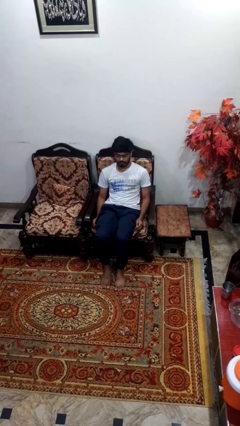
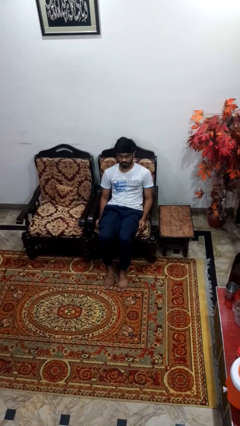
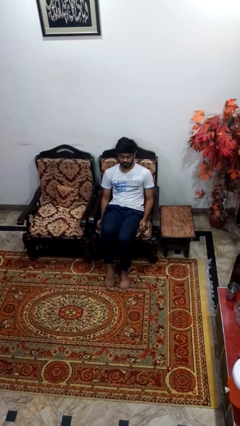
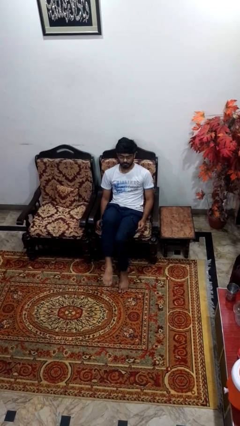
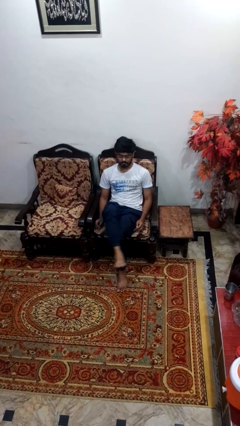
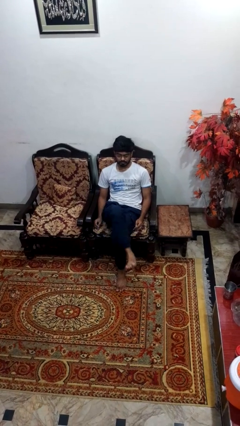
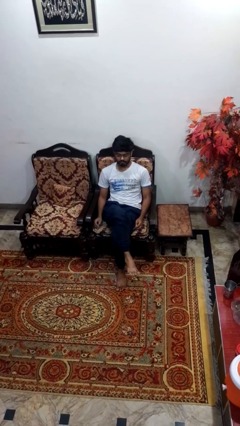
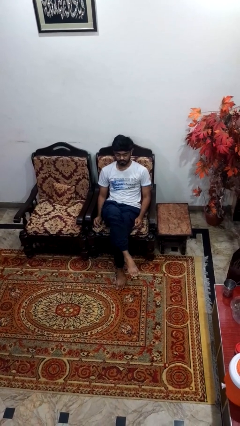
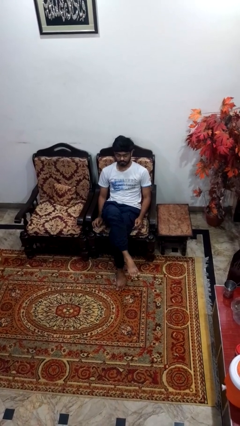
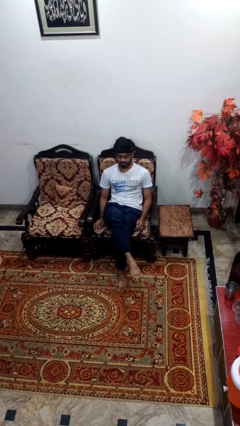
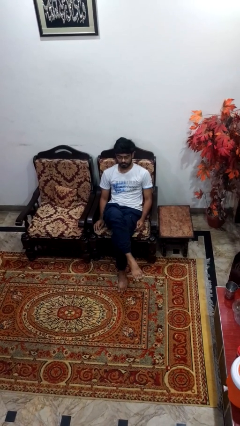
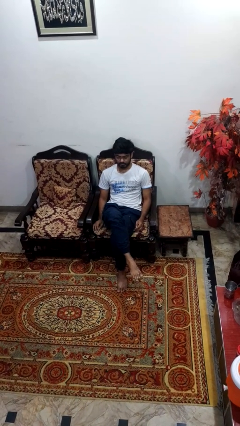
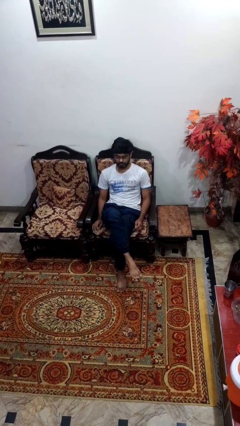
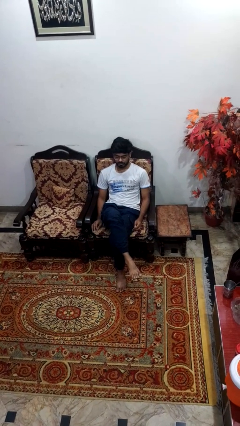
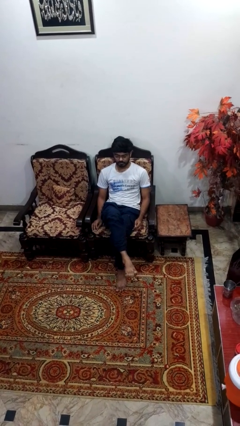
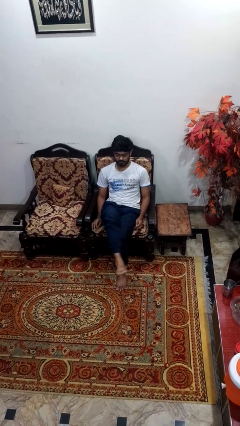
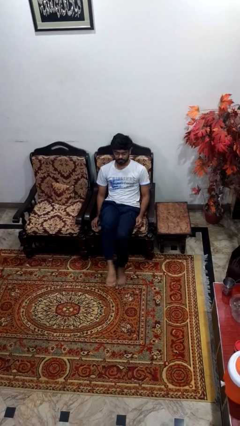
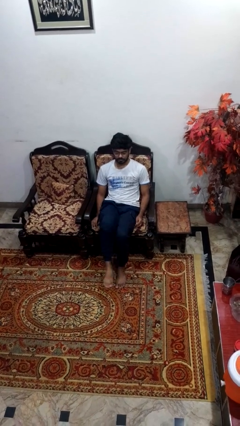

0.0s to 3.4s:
person crosses legs

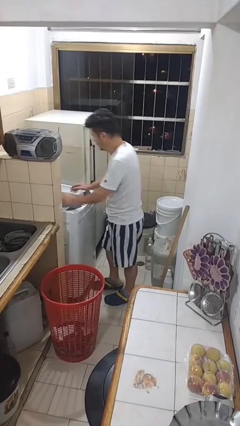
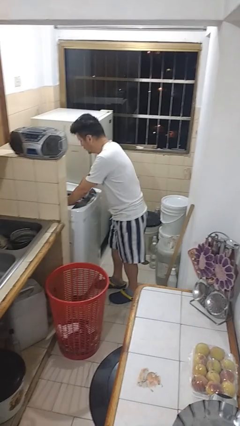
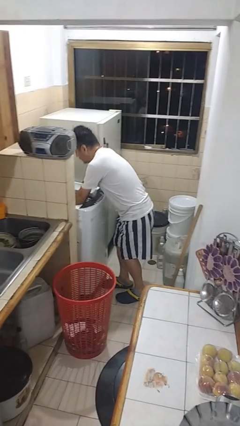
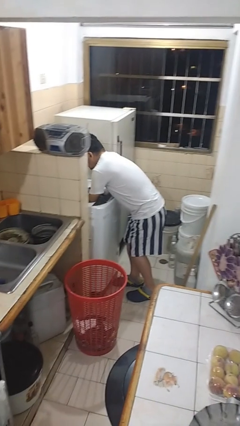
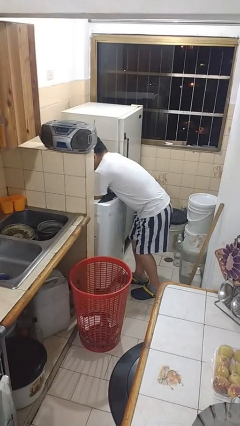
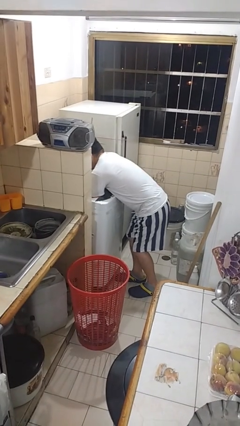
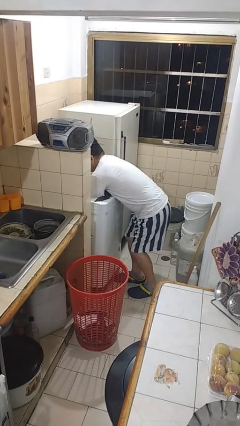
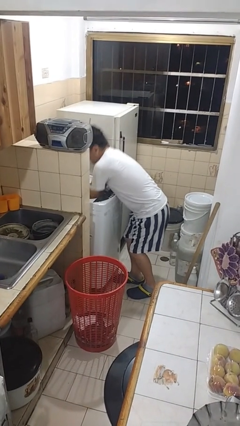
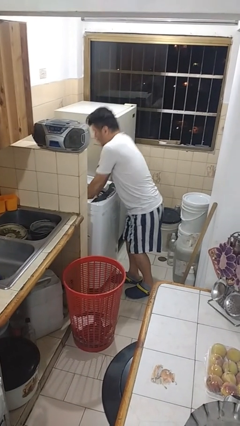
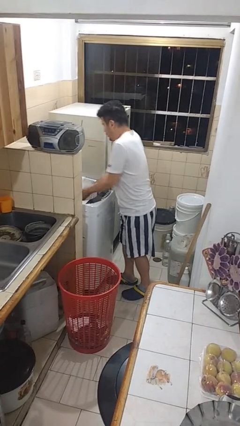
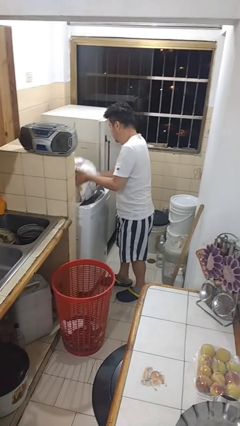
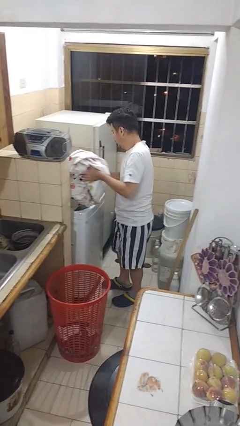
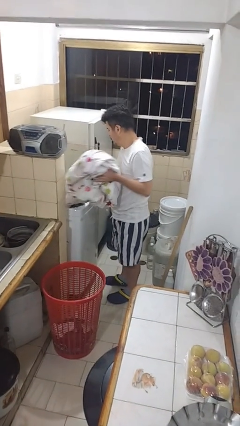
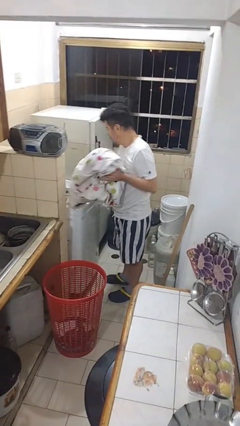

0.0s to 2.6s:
person unloads clotheswasher

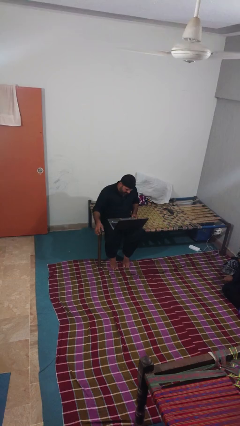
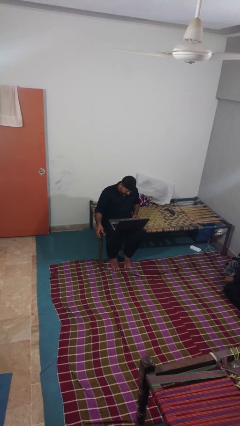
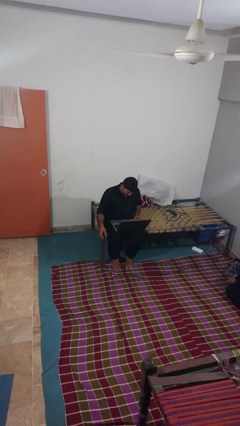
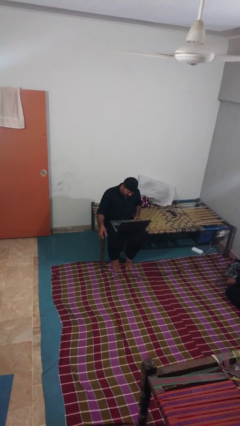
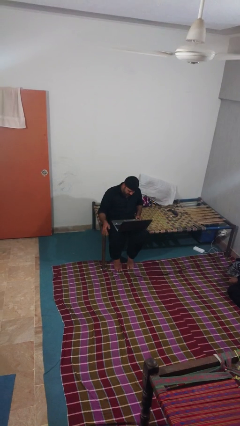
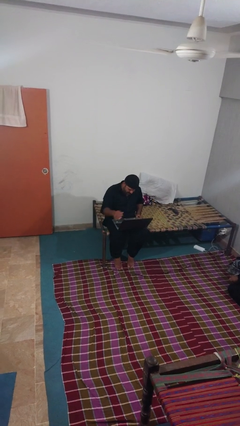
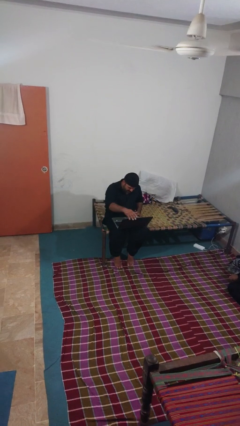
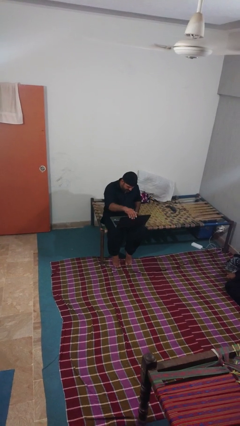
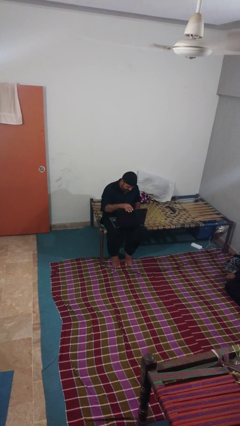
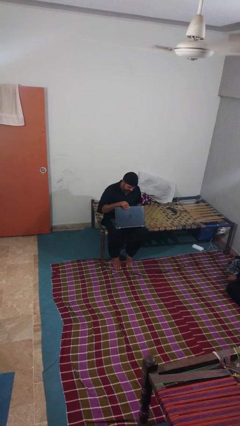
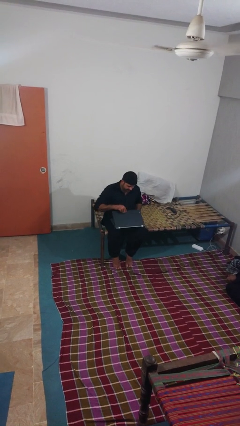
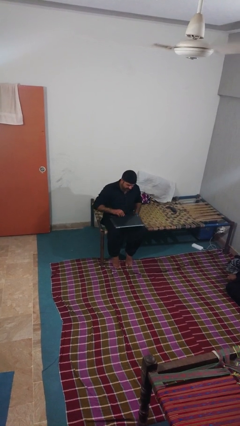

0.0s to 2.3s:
person closes laptop

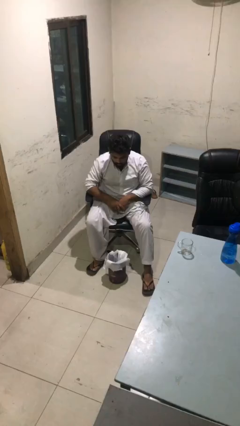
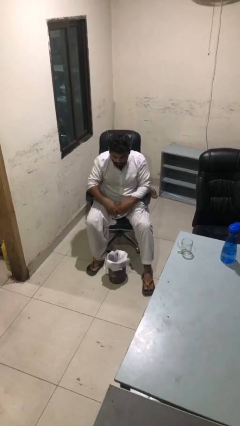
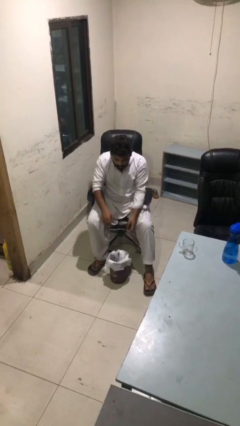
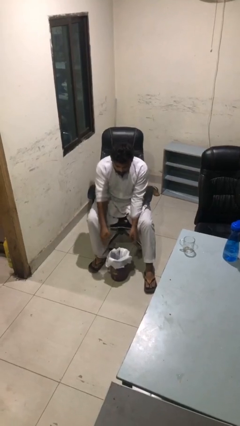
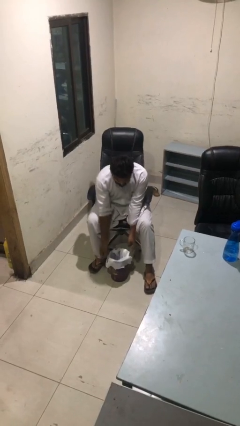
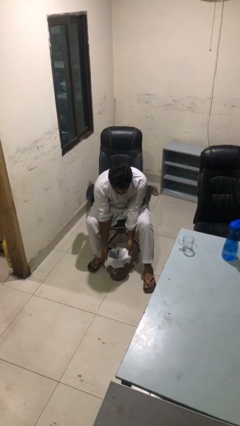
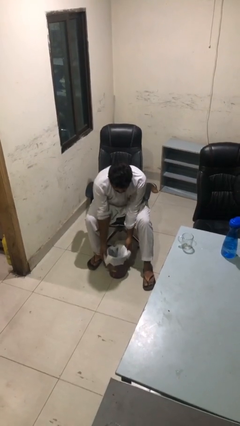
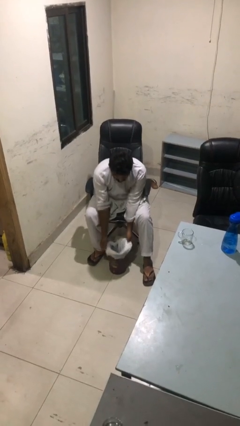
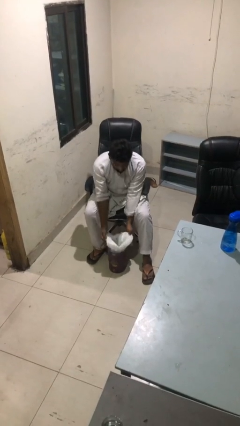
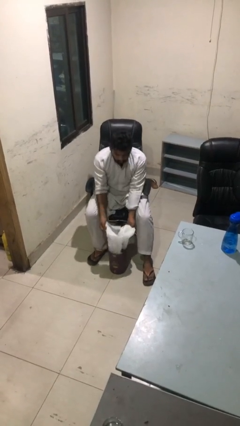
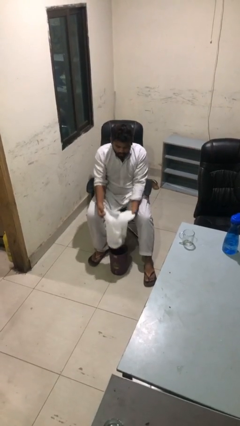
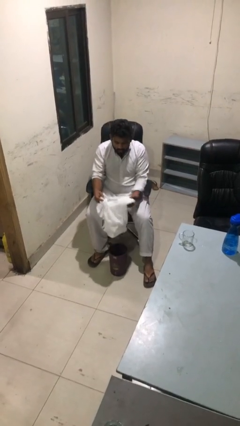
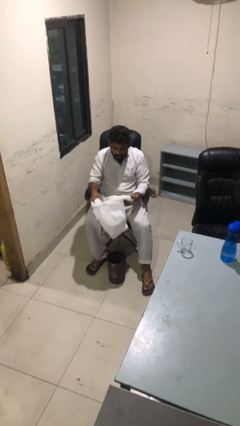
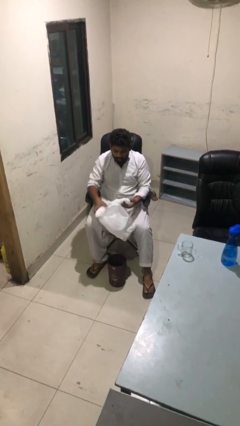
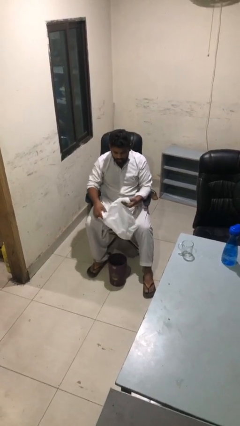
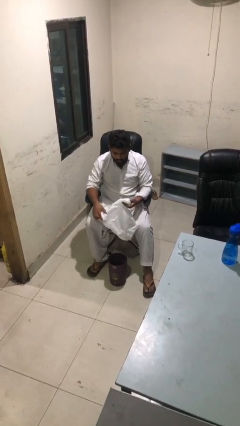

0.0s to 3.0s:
person removes trashbag from trashcan

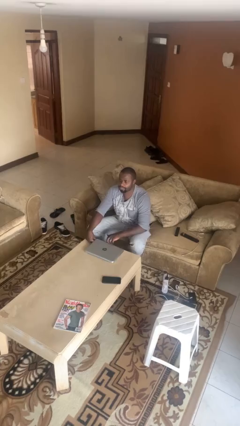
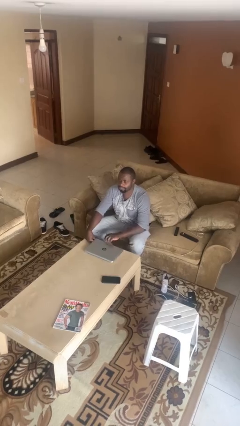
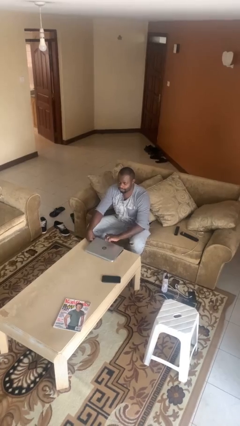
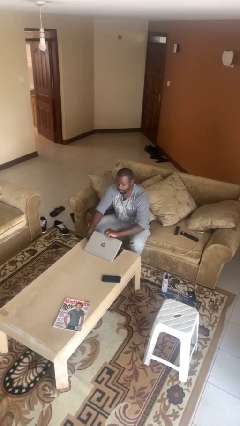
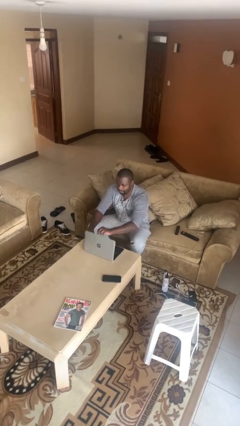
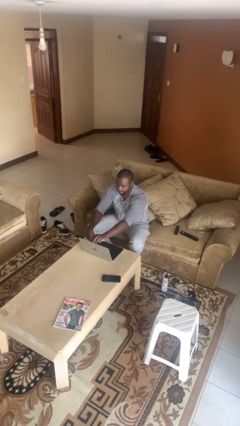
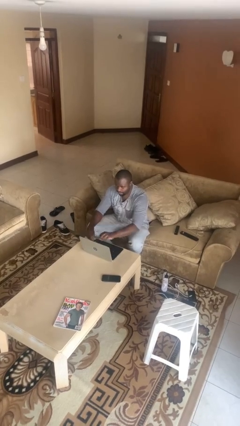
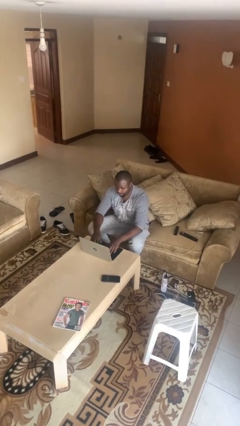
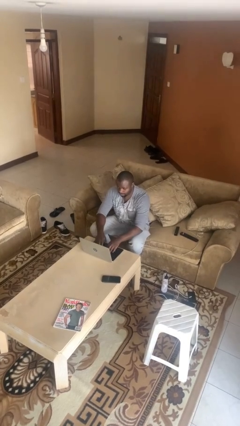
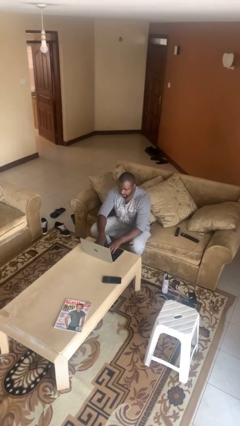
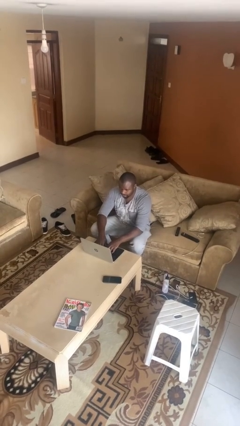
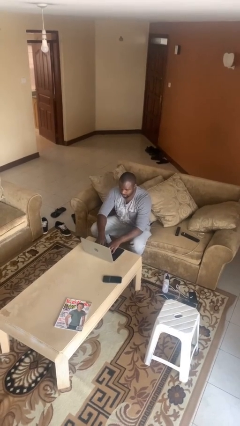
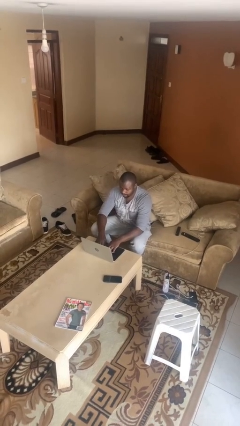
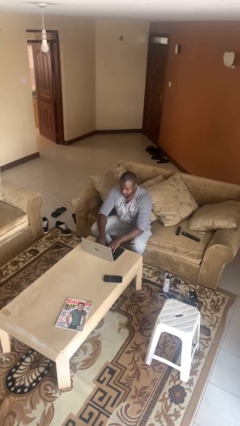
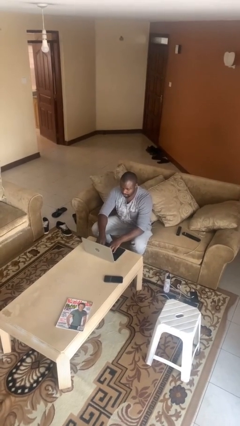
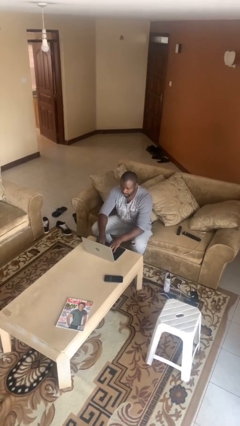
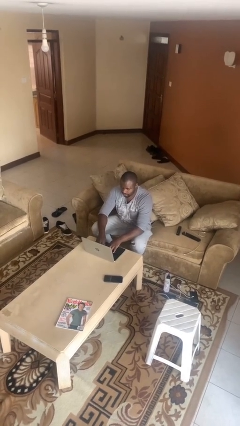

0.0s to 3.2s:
person interacts with laptop

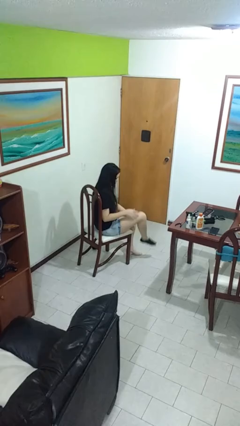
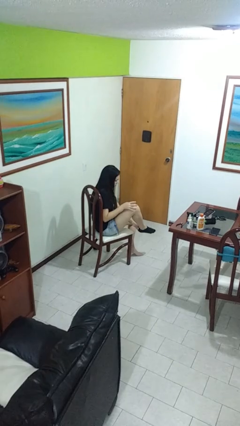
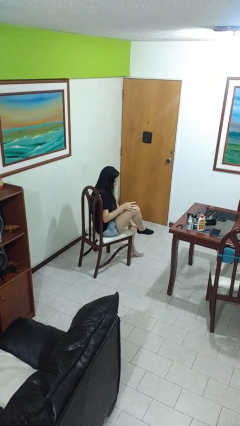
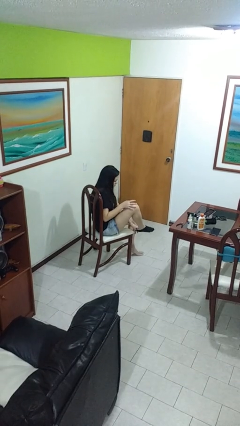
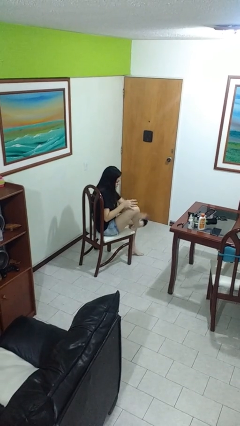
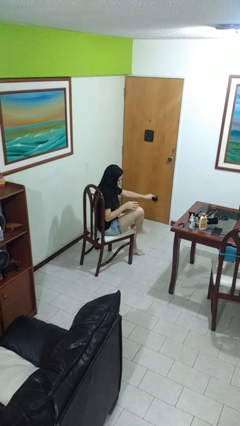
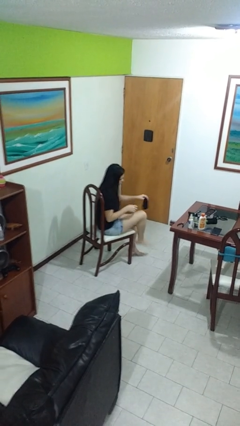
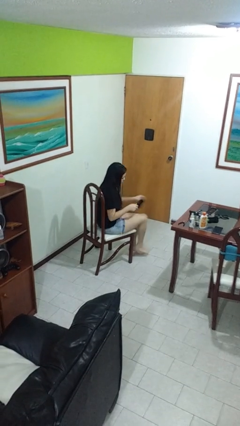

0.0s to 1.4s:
person takes off socks

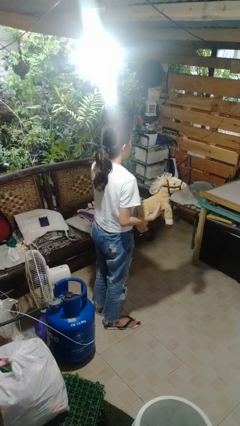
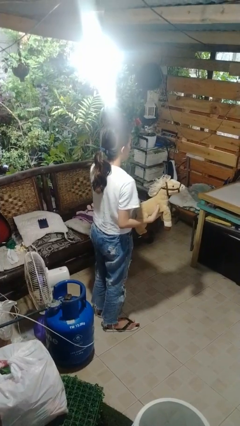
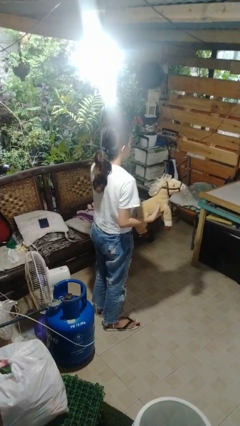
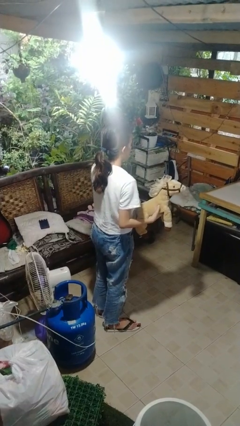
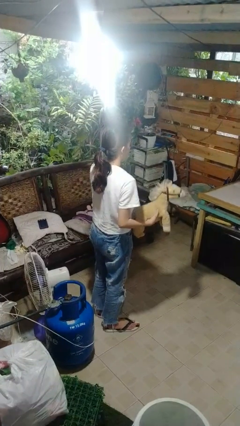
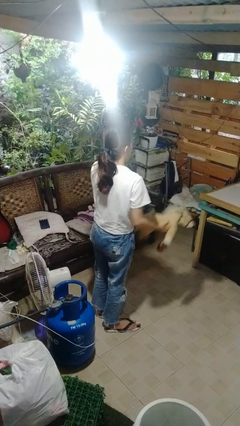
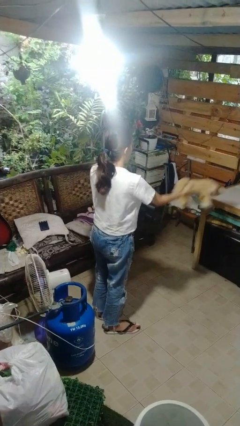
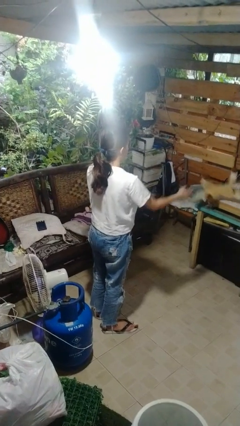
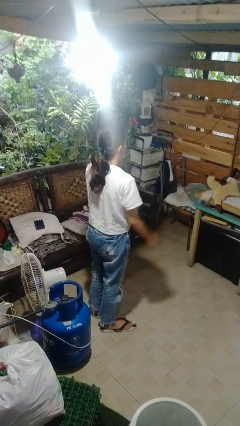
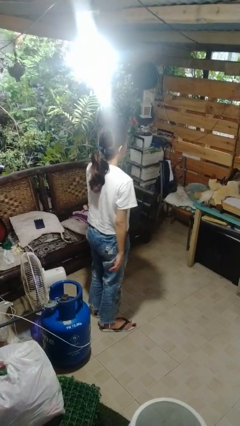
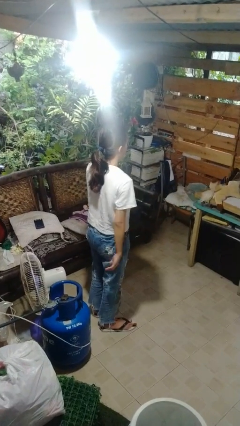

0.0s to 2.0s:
person throws object on table
